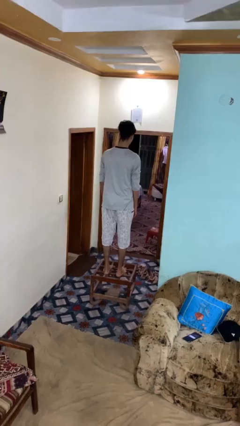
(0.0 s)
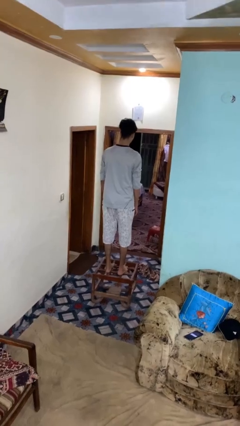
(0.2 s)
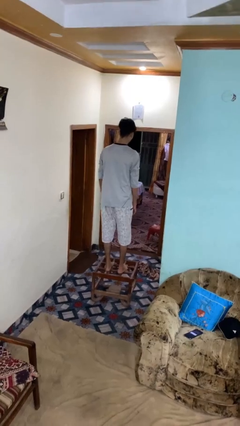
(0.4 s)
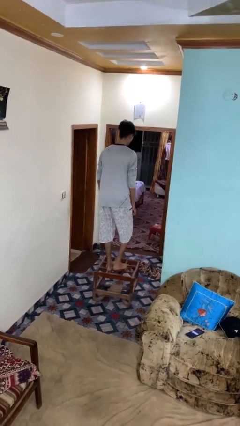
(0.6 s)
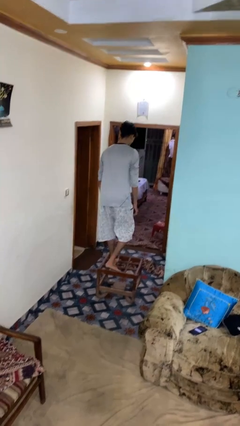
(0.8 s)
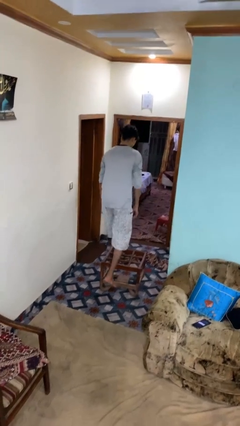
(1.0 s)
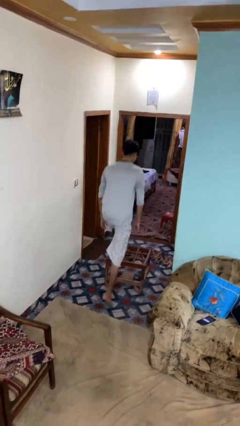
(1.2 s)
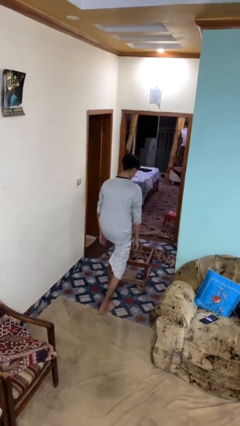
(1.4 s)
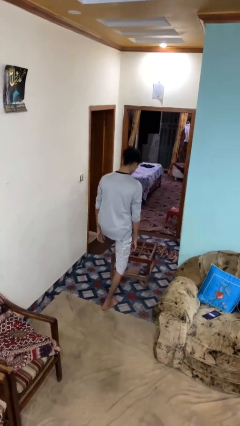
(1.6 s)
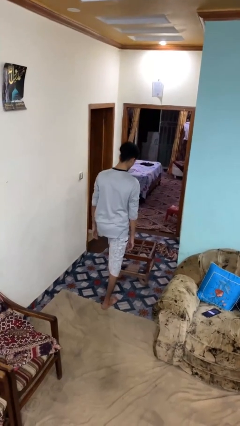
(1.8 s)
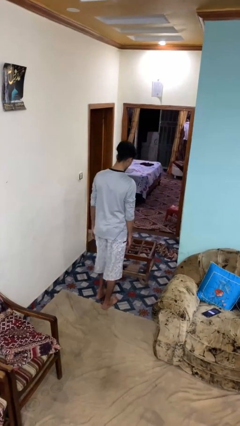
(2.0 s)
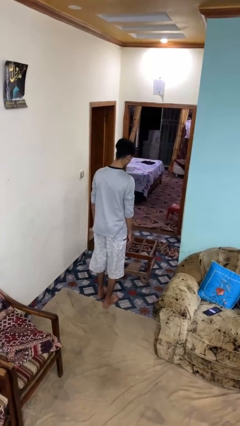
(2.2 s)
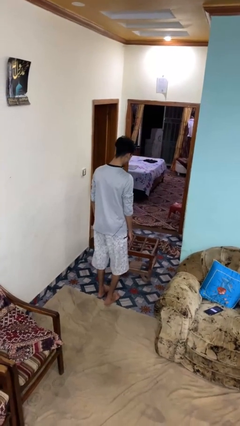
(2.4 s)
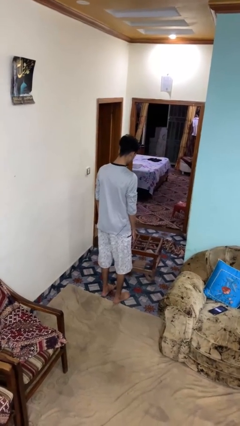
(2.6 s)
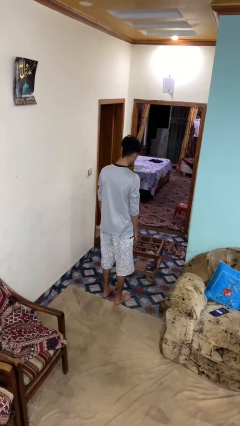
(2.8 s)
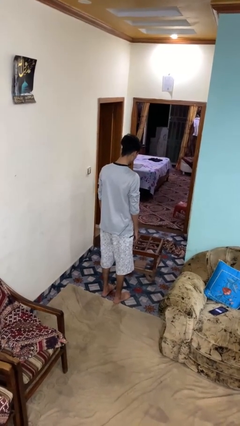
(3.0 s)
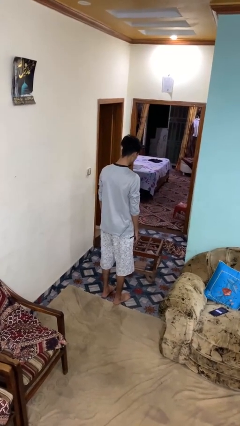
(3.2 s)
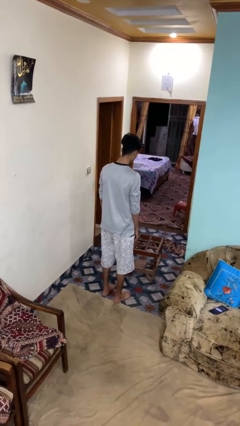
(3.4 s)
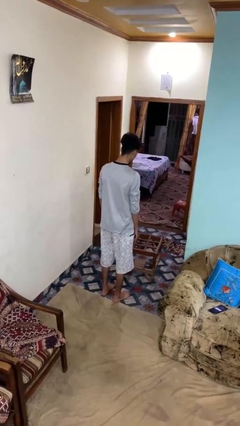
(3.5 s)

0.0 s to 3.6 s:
person climbs off table

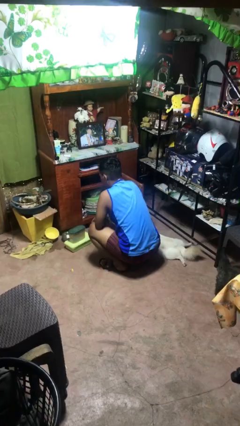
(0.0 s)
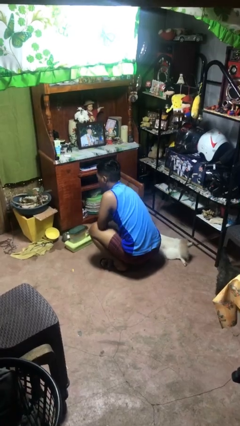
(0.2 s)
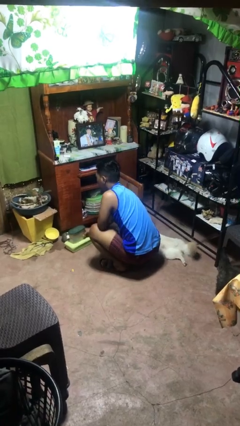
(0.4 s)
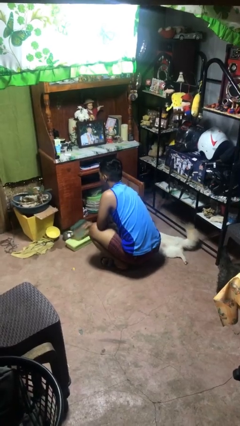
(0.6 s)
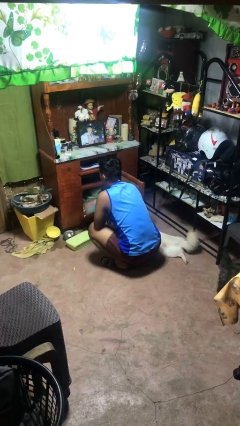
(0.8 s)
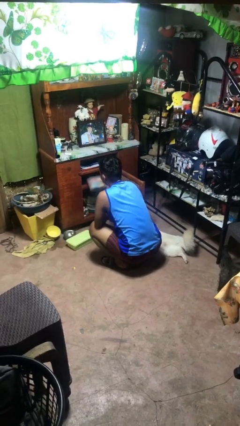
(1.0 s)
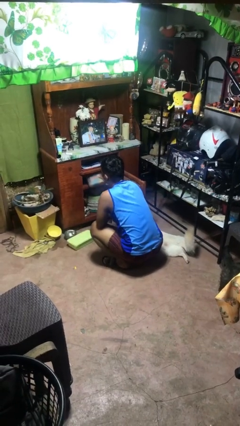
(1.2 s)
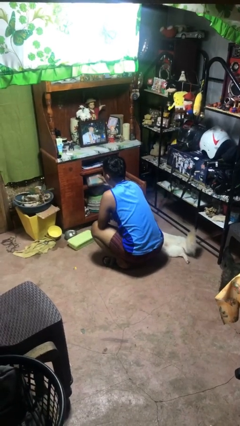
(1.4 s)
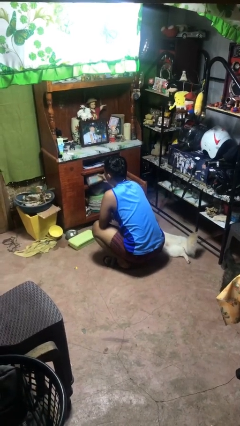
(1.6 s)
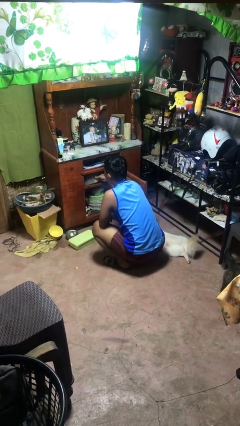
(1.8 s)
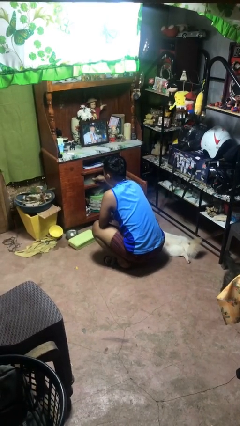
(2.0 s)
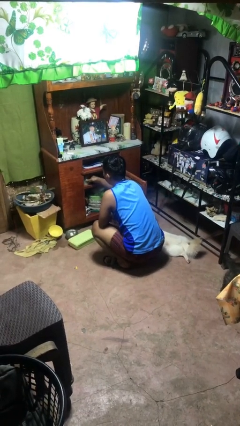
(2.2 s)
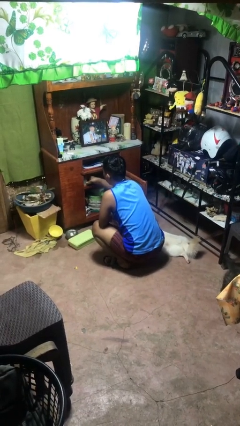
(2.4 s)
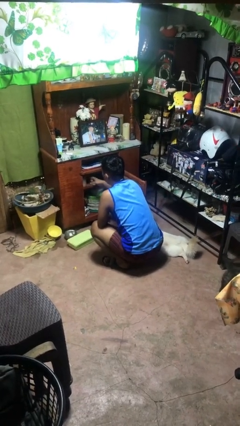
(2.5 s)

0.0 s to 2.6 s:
person puts object in cabinet

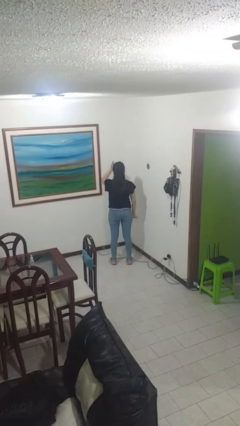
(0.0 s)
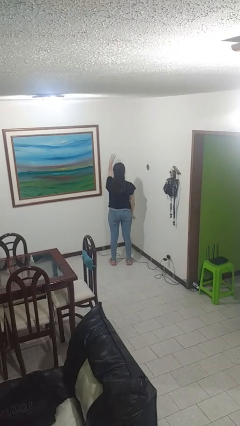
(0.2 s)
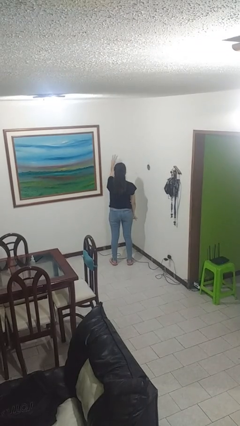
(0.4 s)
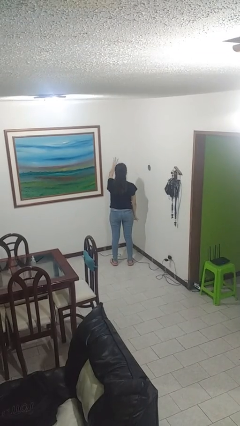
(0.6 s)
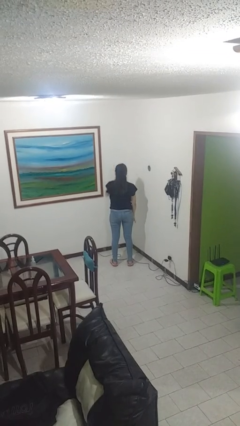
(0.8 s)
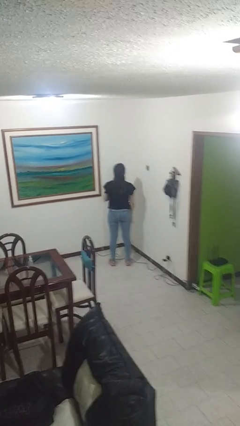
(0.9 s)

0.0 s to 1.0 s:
person gestures number three

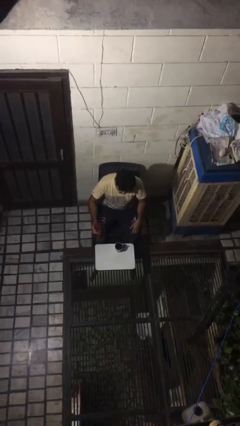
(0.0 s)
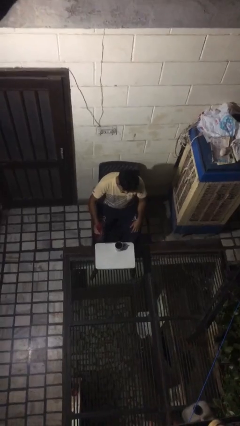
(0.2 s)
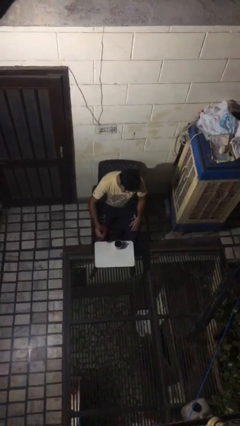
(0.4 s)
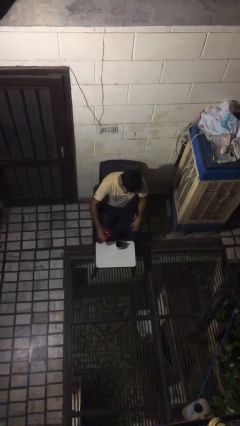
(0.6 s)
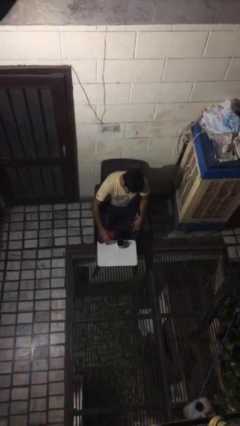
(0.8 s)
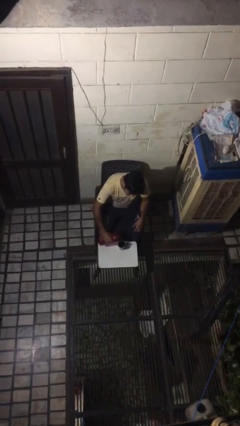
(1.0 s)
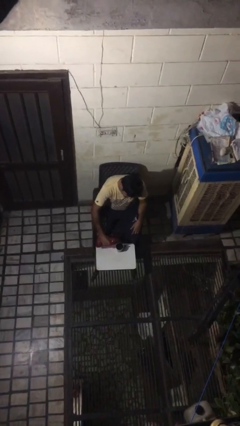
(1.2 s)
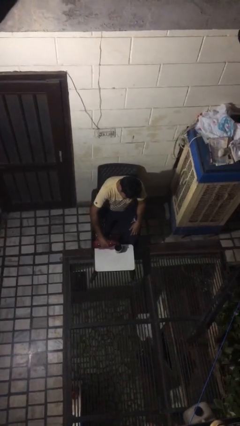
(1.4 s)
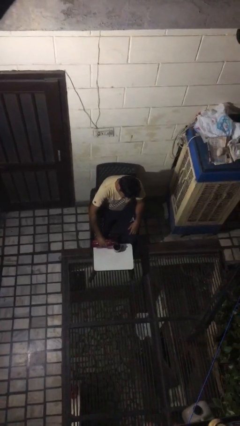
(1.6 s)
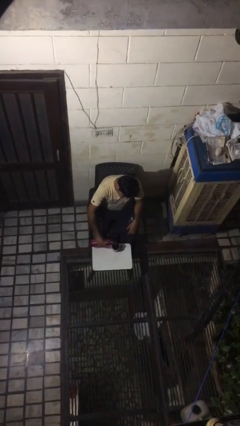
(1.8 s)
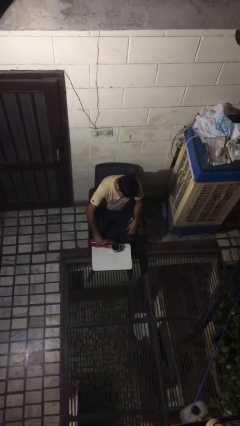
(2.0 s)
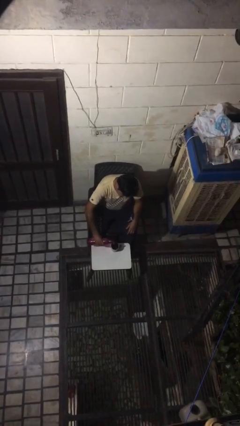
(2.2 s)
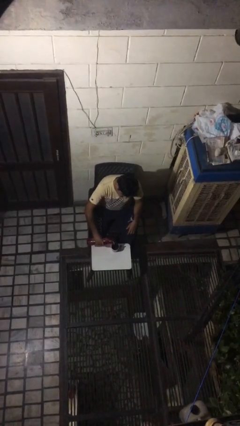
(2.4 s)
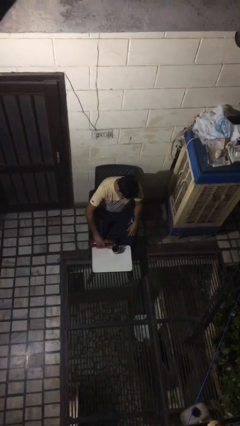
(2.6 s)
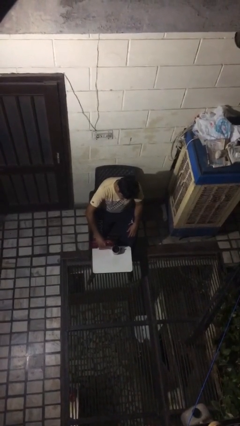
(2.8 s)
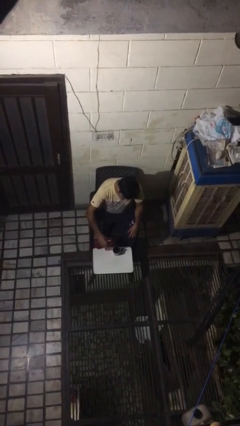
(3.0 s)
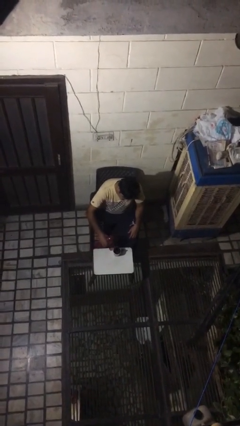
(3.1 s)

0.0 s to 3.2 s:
person pours liquid into cup

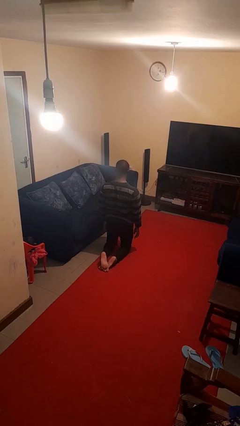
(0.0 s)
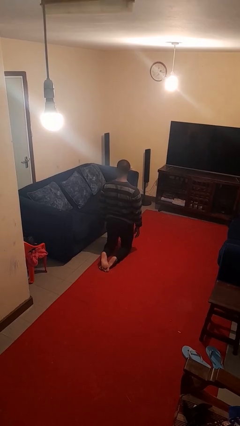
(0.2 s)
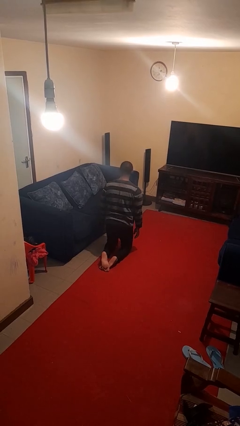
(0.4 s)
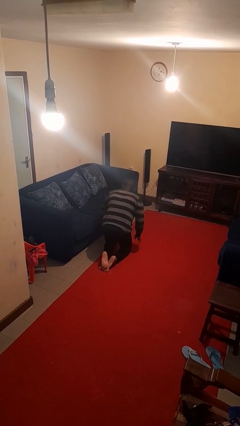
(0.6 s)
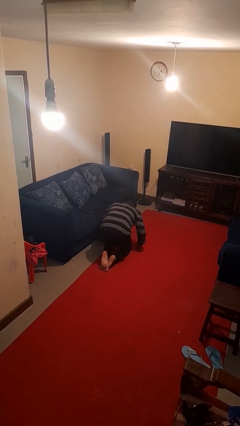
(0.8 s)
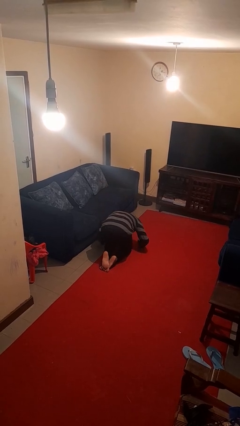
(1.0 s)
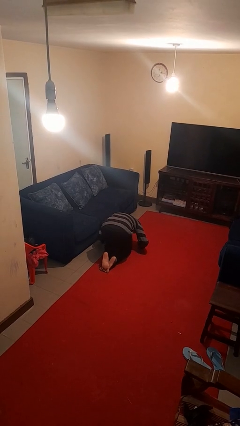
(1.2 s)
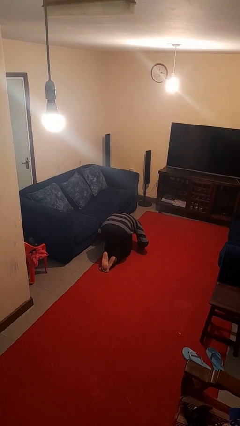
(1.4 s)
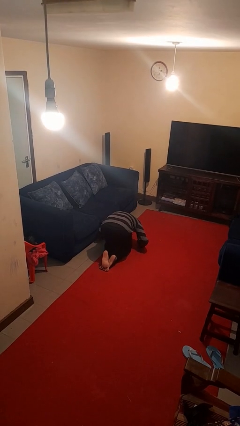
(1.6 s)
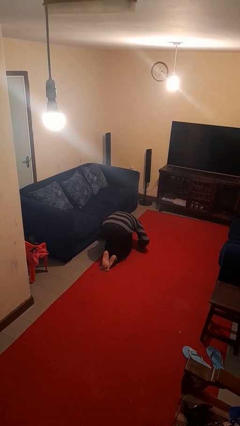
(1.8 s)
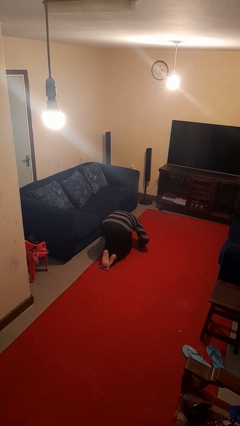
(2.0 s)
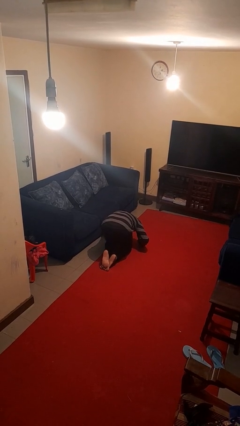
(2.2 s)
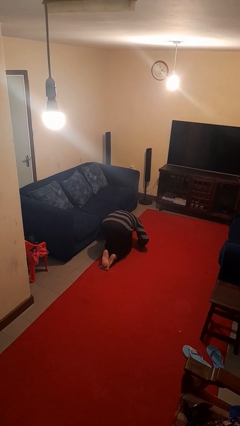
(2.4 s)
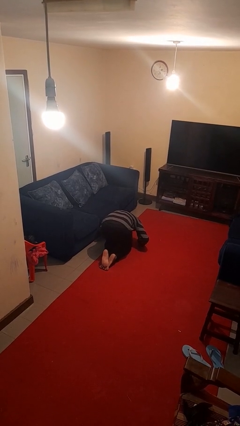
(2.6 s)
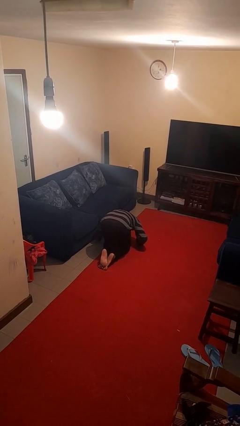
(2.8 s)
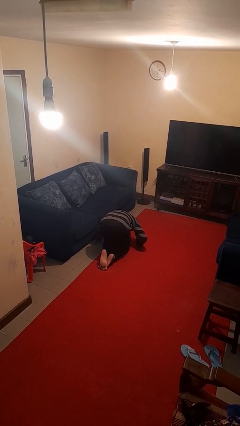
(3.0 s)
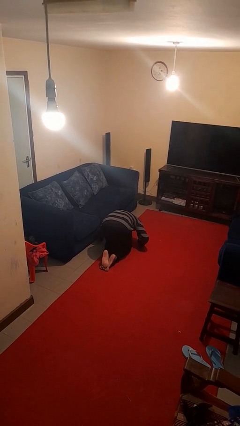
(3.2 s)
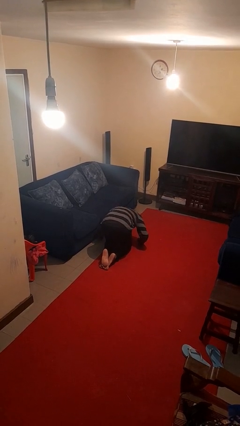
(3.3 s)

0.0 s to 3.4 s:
person searches under couch

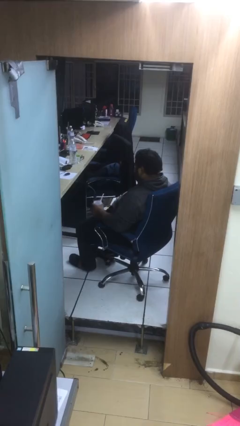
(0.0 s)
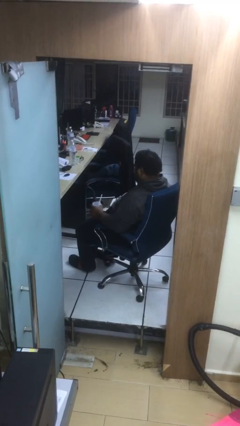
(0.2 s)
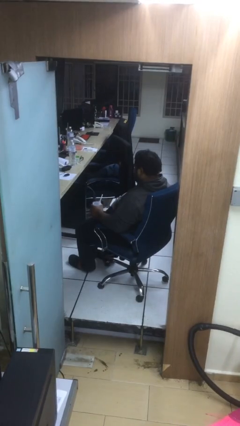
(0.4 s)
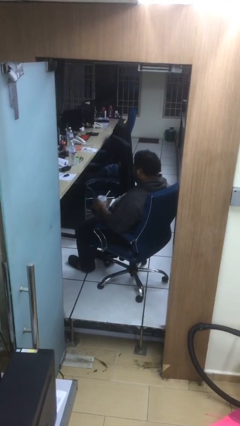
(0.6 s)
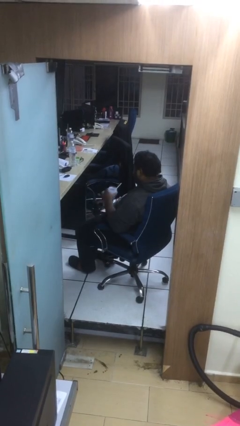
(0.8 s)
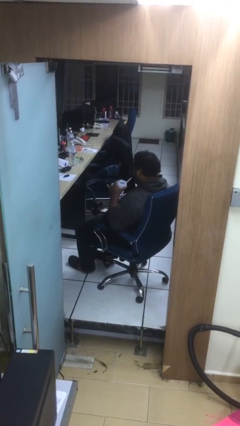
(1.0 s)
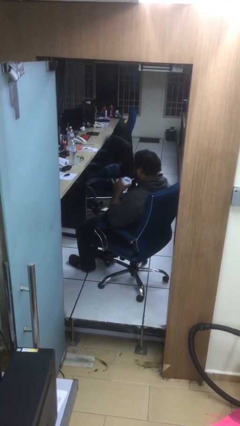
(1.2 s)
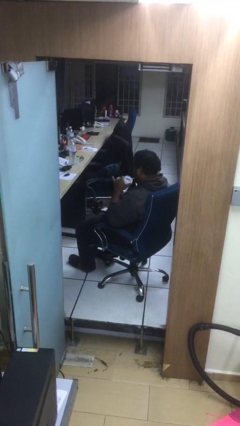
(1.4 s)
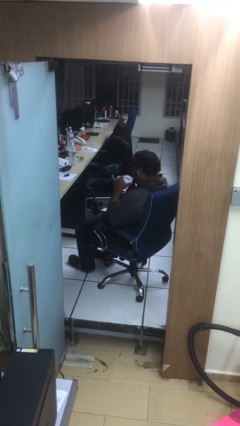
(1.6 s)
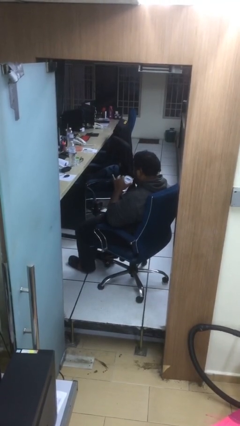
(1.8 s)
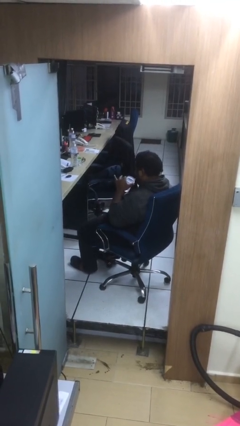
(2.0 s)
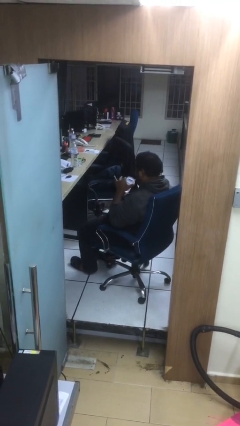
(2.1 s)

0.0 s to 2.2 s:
person drinks from straw

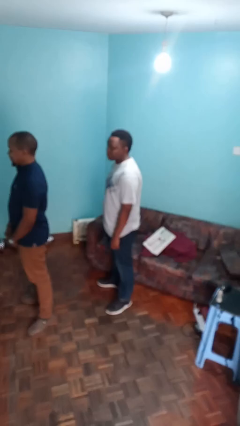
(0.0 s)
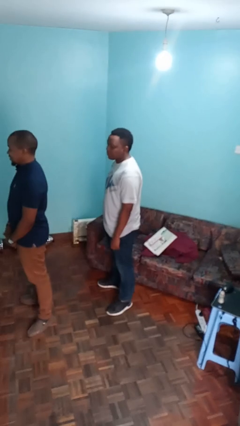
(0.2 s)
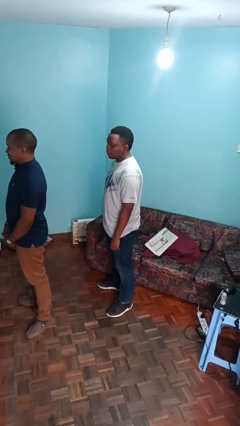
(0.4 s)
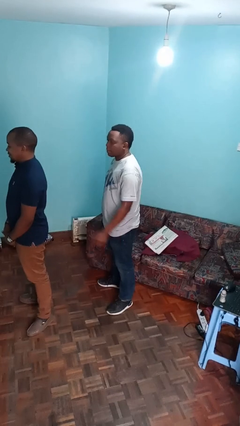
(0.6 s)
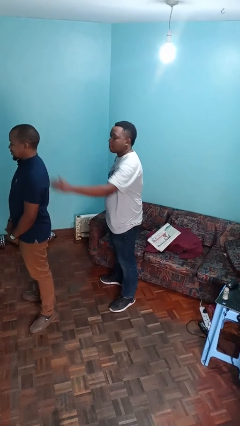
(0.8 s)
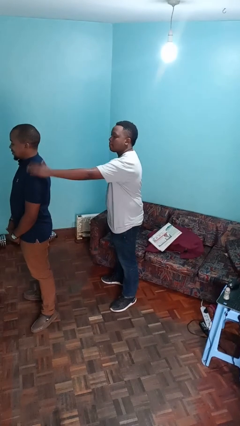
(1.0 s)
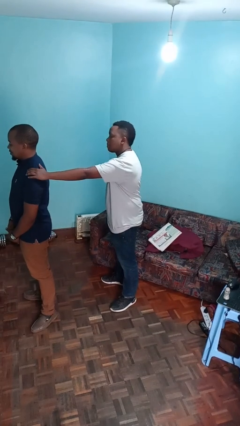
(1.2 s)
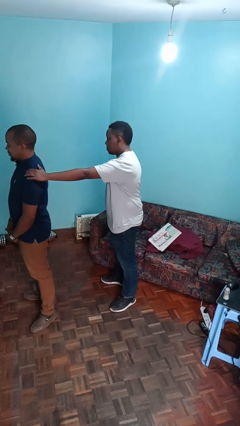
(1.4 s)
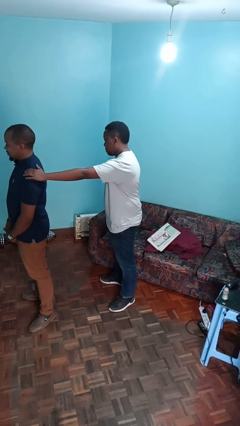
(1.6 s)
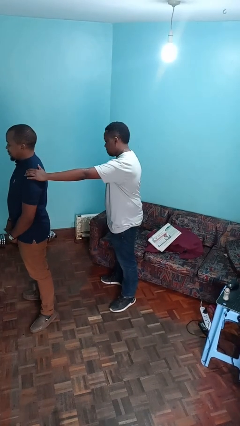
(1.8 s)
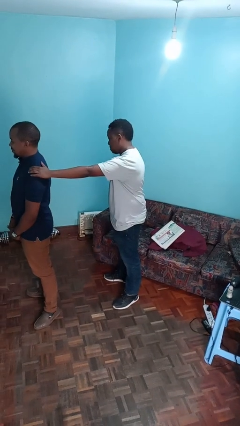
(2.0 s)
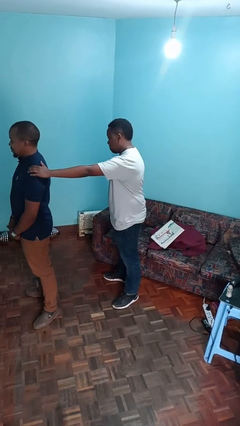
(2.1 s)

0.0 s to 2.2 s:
person grabs person by shoulder
